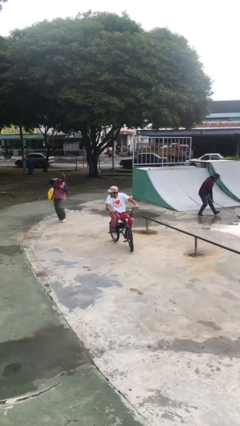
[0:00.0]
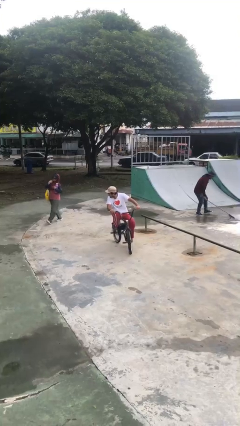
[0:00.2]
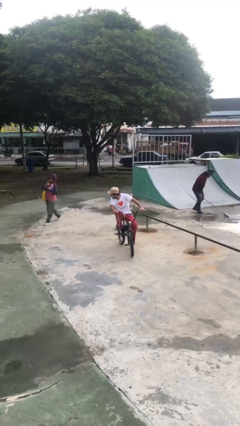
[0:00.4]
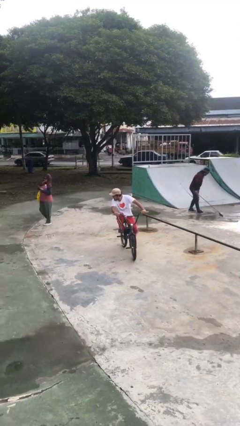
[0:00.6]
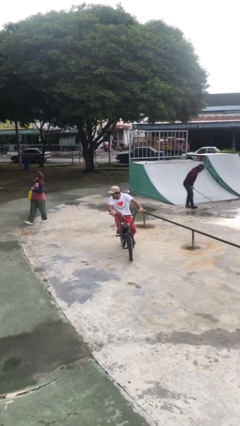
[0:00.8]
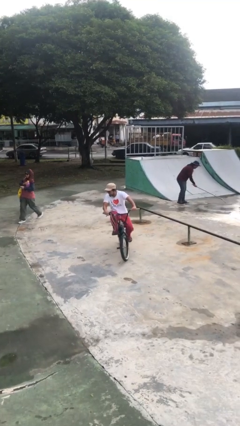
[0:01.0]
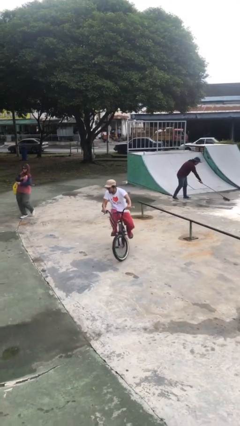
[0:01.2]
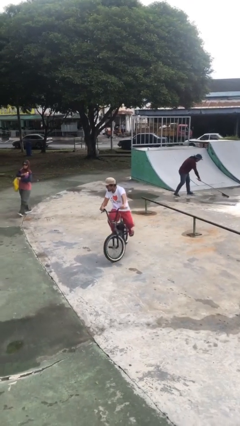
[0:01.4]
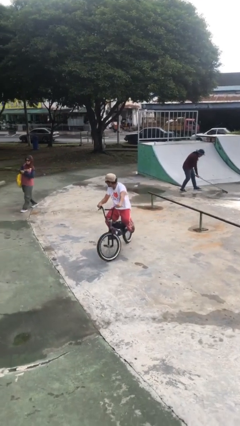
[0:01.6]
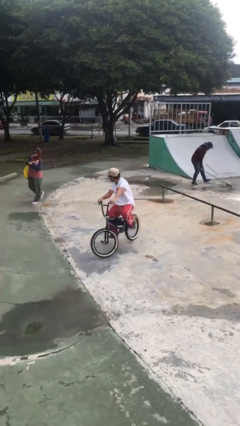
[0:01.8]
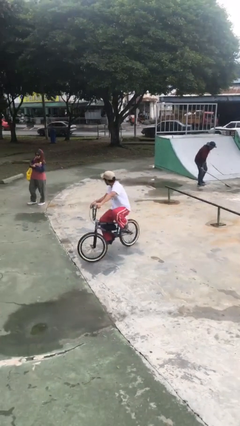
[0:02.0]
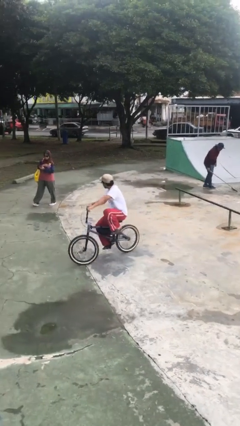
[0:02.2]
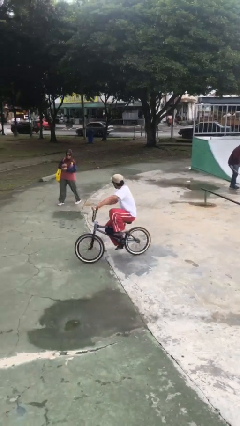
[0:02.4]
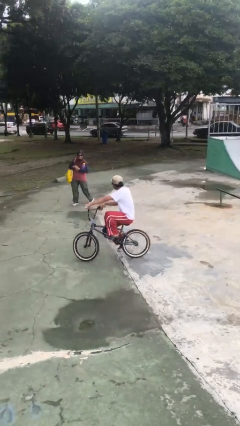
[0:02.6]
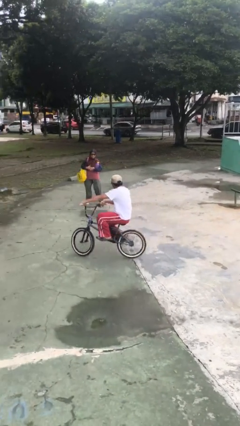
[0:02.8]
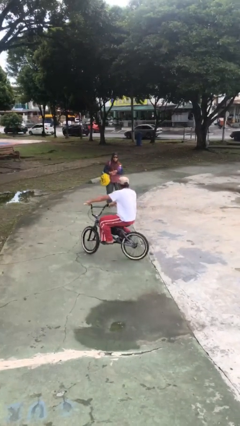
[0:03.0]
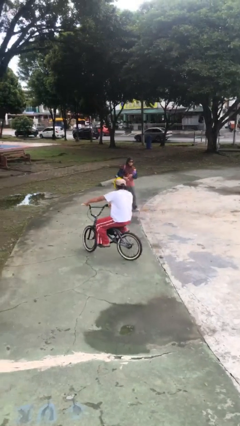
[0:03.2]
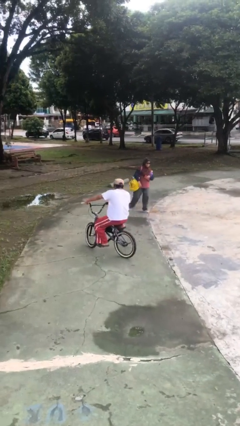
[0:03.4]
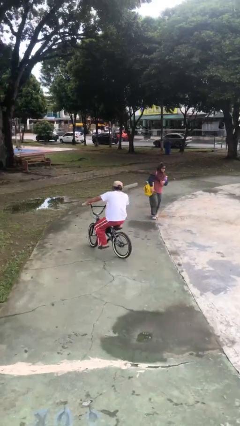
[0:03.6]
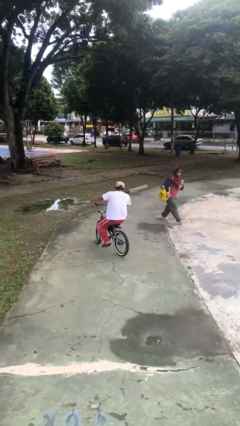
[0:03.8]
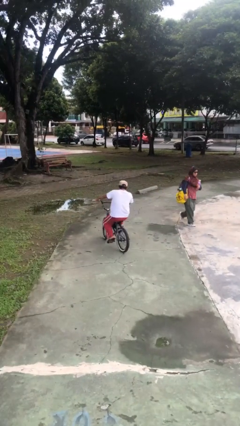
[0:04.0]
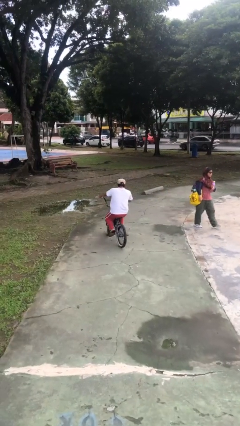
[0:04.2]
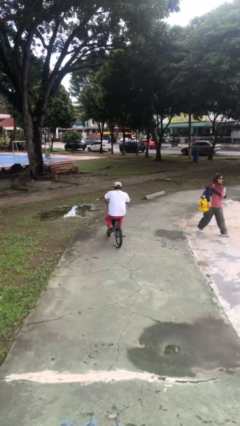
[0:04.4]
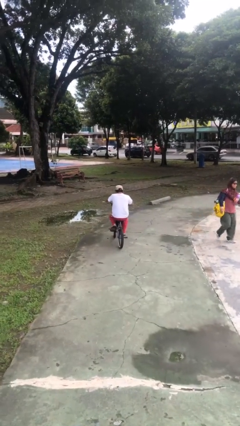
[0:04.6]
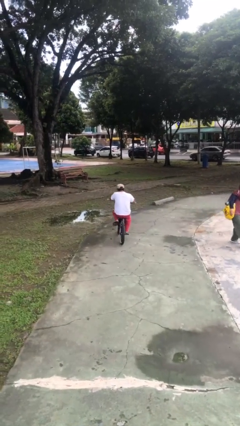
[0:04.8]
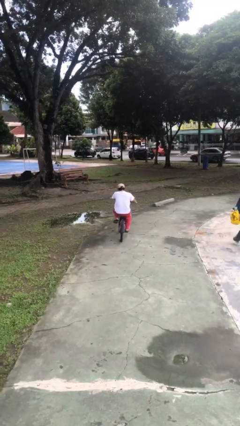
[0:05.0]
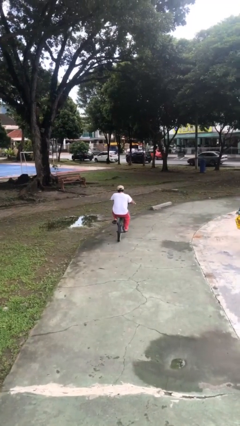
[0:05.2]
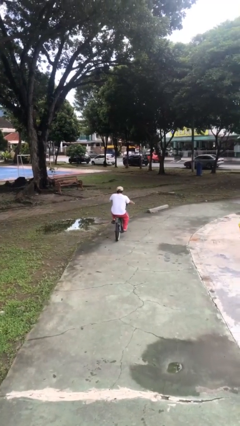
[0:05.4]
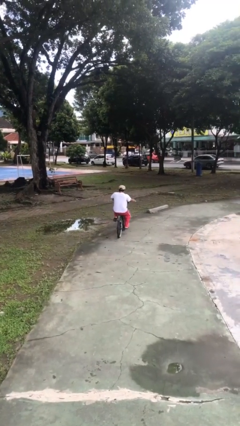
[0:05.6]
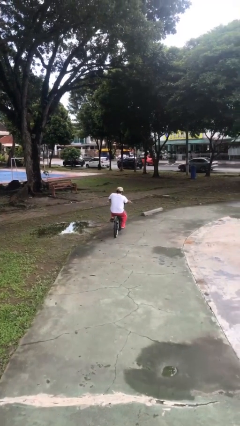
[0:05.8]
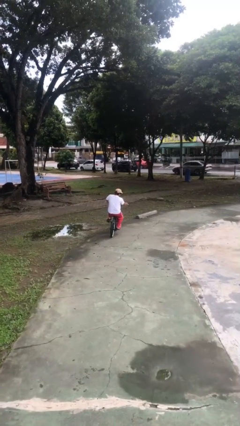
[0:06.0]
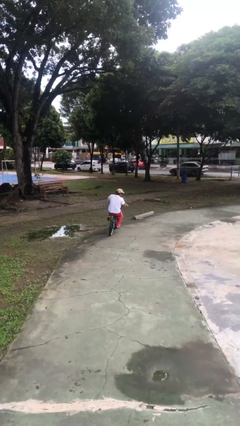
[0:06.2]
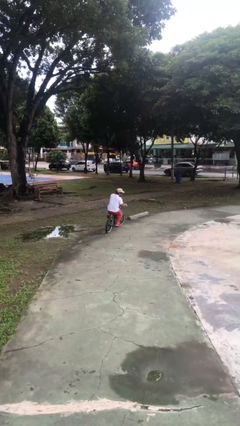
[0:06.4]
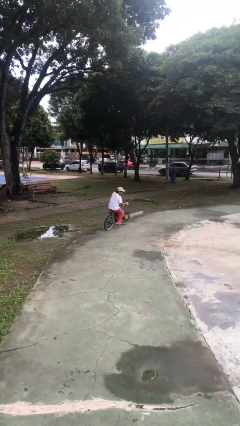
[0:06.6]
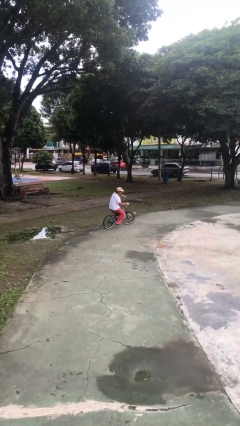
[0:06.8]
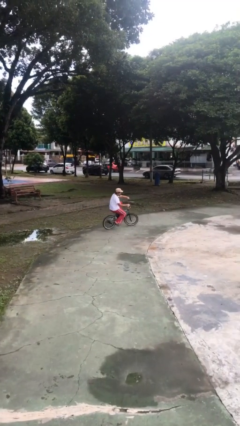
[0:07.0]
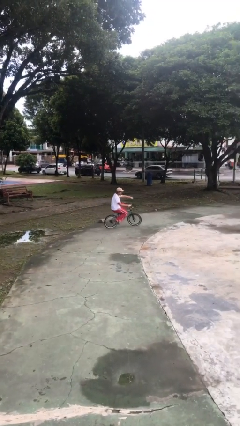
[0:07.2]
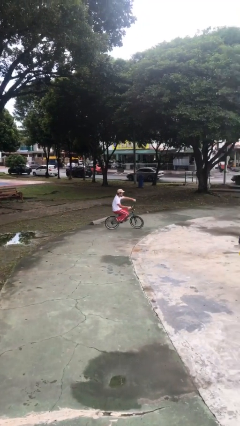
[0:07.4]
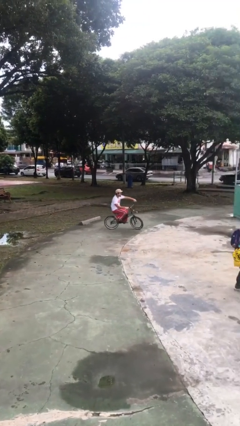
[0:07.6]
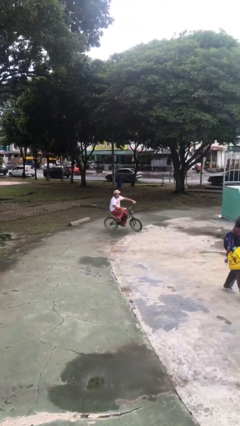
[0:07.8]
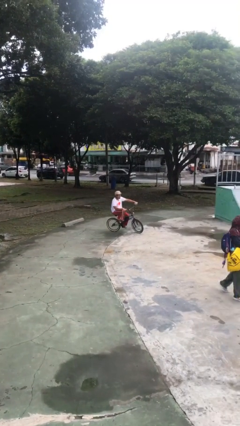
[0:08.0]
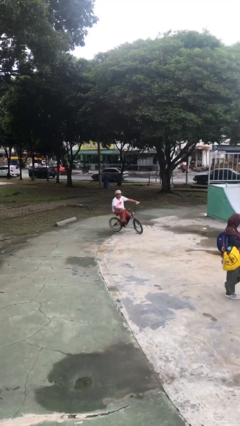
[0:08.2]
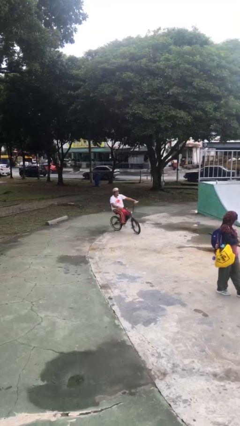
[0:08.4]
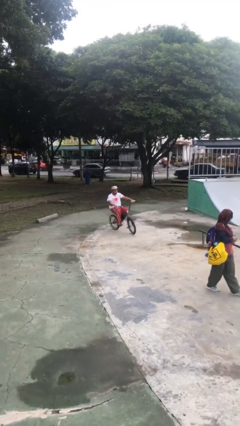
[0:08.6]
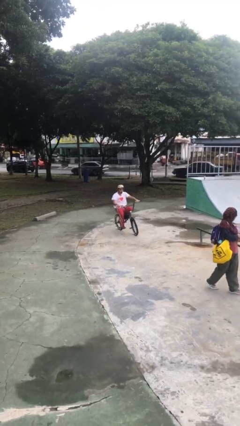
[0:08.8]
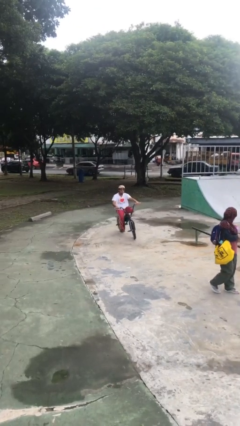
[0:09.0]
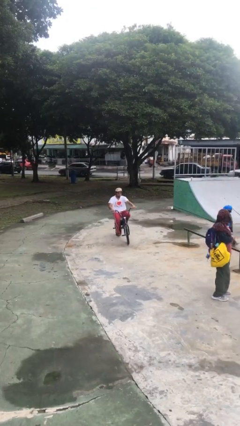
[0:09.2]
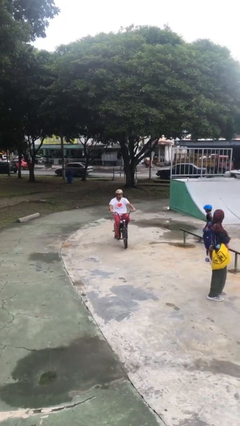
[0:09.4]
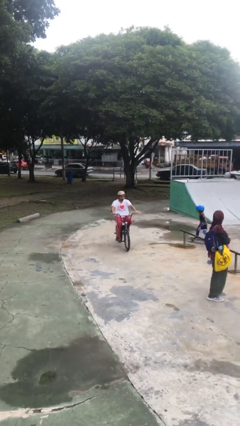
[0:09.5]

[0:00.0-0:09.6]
person rides bicycle

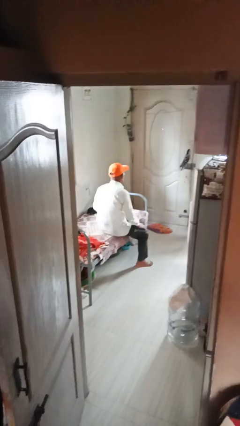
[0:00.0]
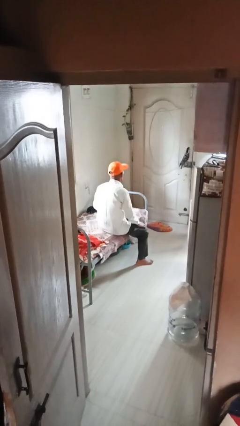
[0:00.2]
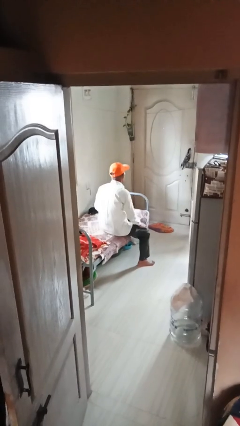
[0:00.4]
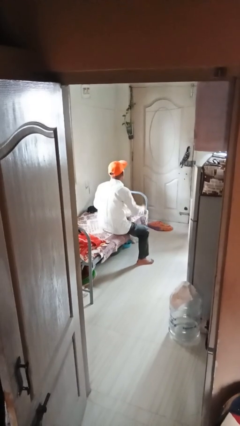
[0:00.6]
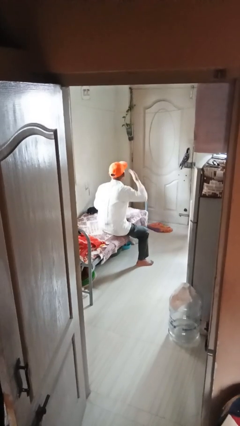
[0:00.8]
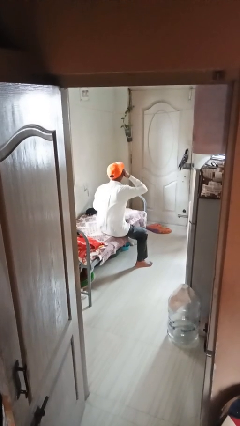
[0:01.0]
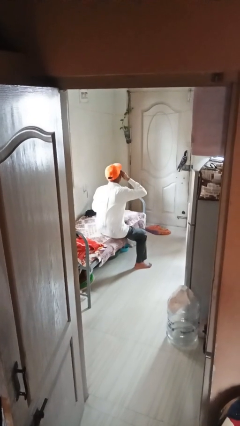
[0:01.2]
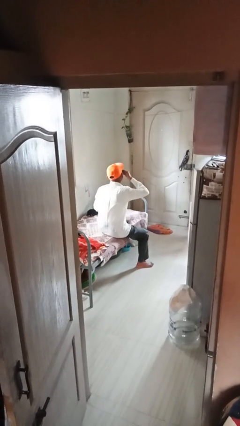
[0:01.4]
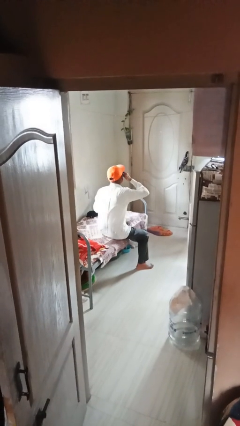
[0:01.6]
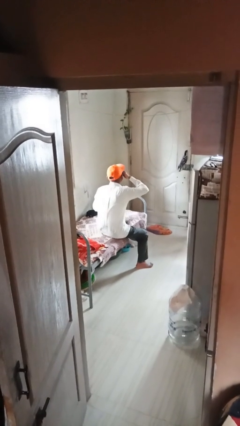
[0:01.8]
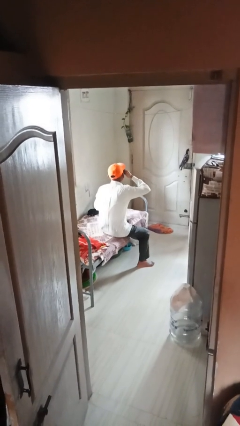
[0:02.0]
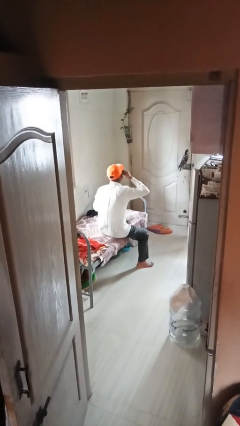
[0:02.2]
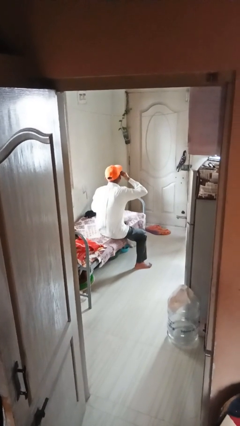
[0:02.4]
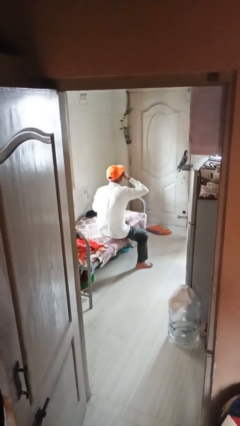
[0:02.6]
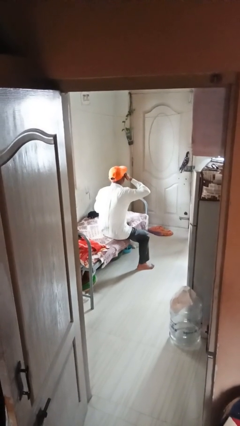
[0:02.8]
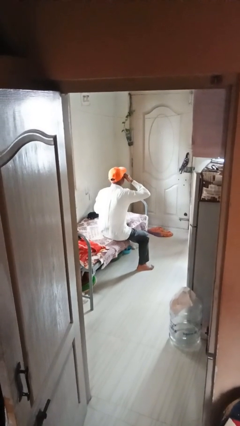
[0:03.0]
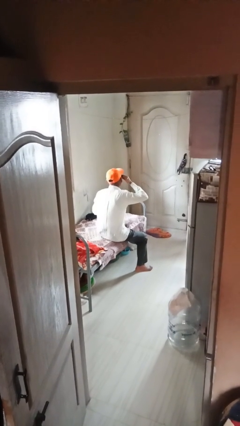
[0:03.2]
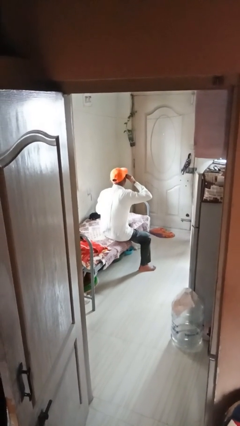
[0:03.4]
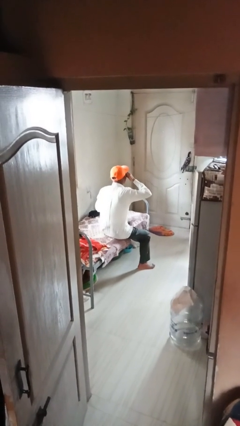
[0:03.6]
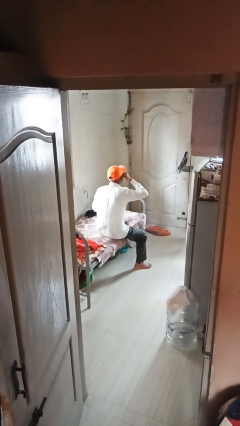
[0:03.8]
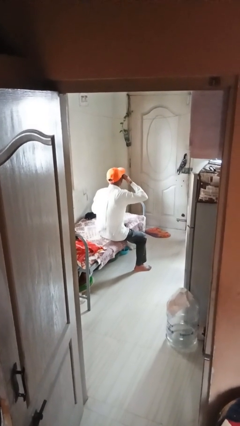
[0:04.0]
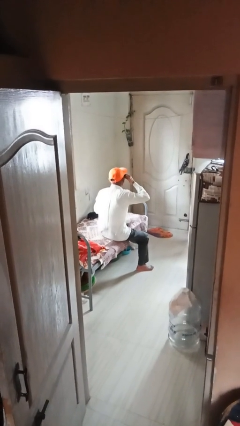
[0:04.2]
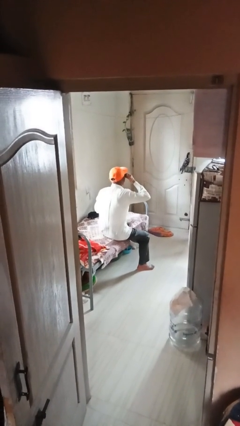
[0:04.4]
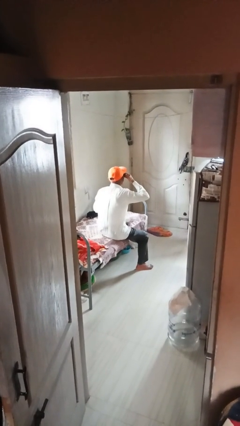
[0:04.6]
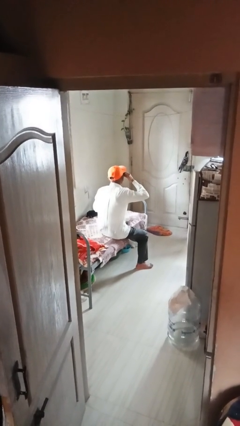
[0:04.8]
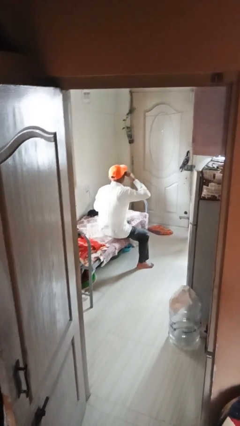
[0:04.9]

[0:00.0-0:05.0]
person rubs eyes

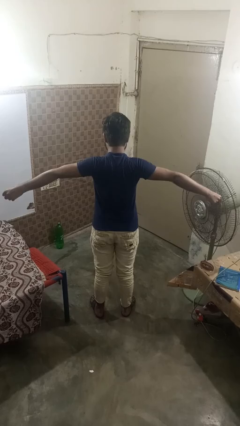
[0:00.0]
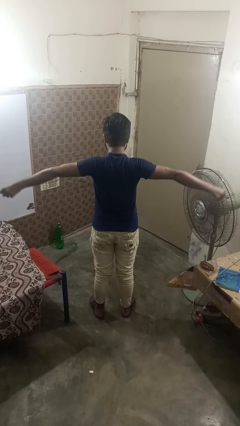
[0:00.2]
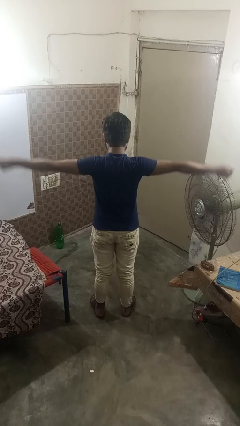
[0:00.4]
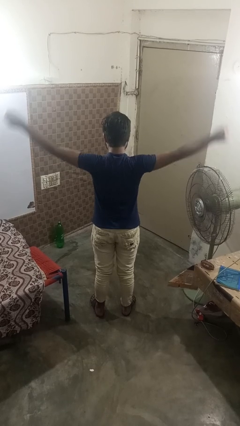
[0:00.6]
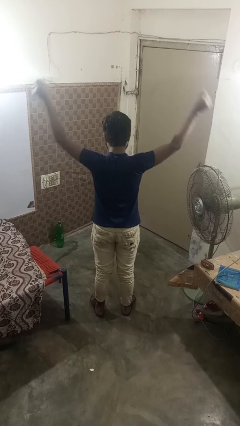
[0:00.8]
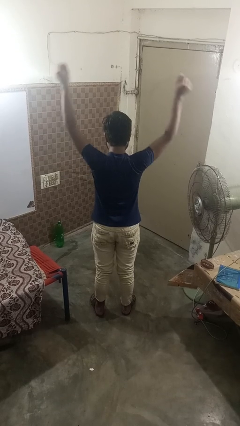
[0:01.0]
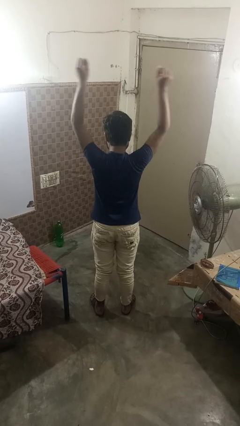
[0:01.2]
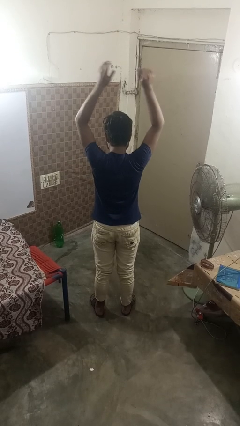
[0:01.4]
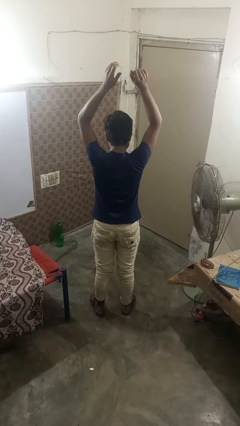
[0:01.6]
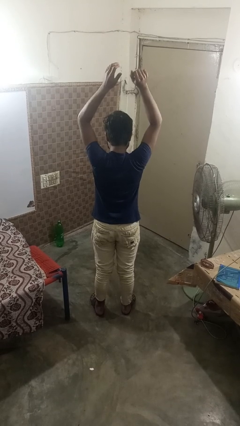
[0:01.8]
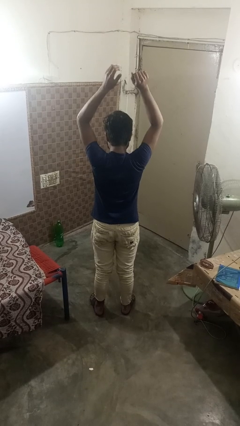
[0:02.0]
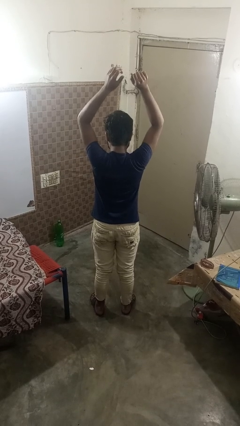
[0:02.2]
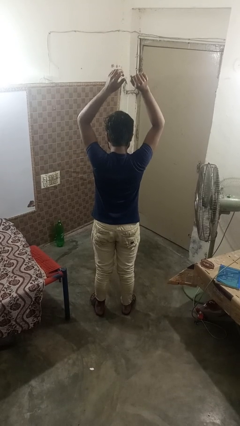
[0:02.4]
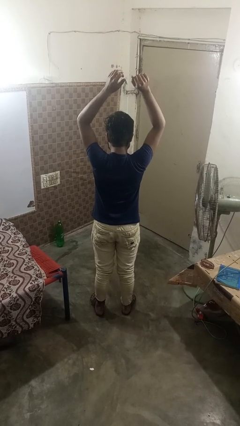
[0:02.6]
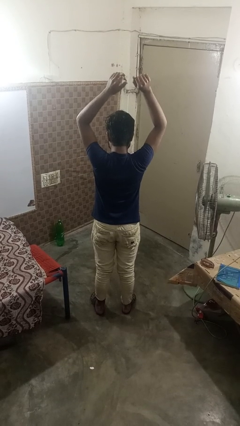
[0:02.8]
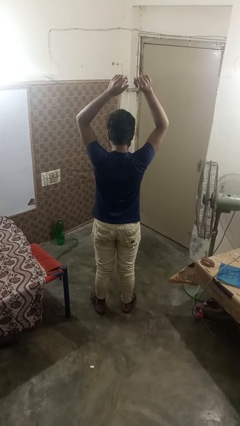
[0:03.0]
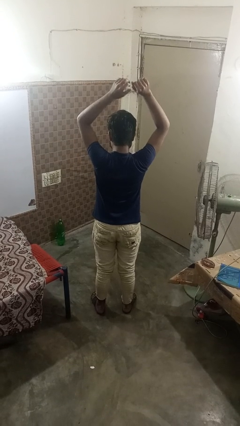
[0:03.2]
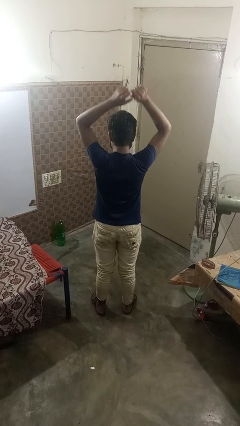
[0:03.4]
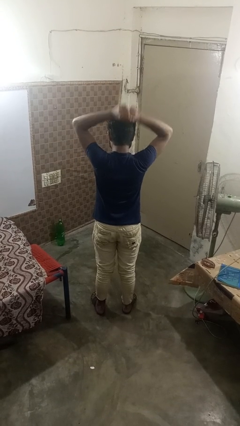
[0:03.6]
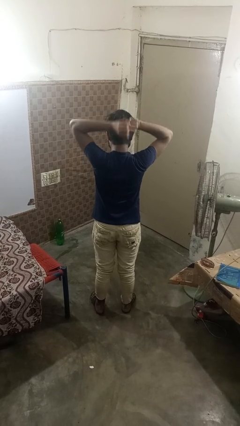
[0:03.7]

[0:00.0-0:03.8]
person stretches arms over head
